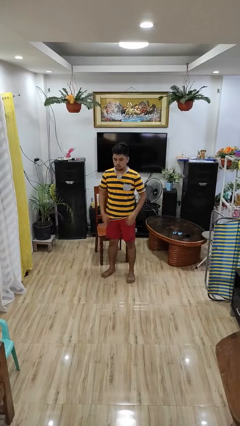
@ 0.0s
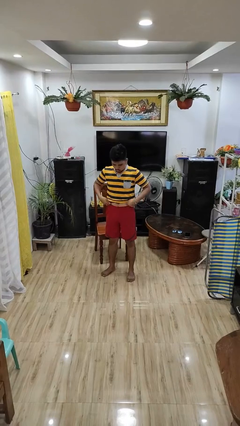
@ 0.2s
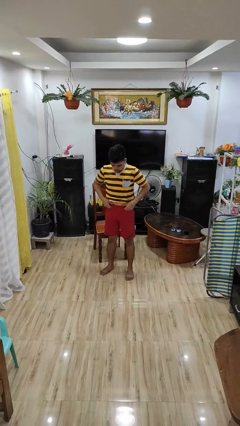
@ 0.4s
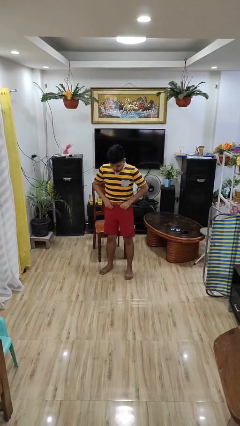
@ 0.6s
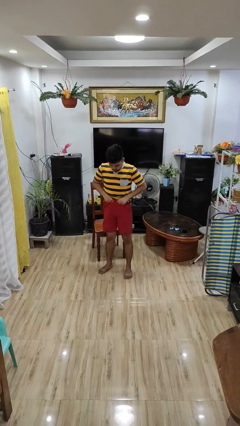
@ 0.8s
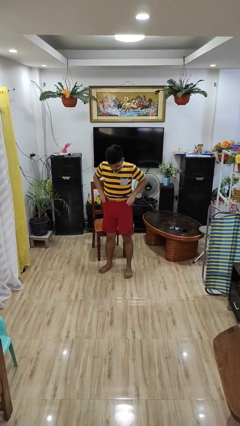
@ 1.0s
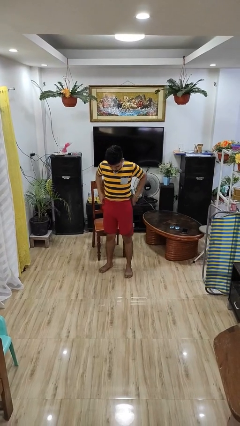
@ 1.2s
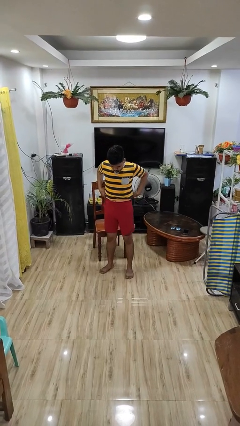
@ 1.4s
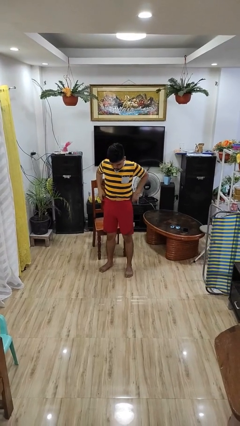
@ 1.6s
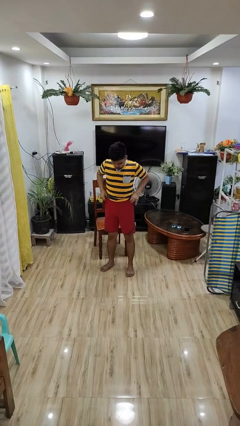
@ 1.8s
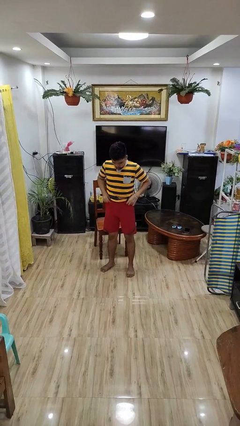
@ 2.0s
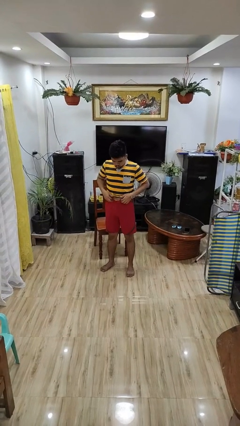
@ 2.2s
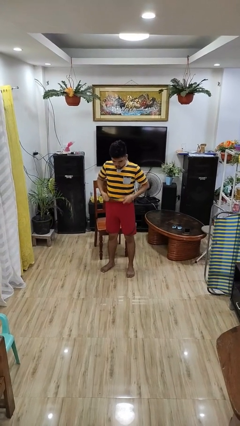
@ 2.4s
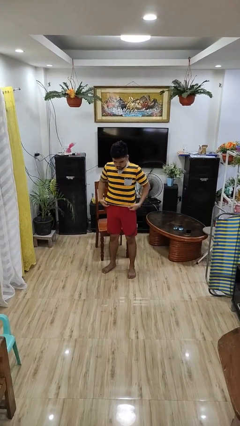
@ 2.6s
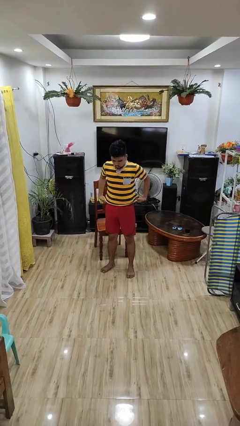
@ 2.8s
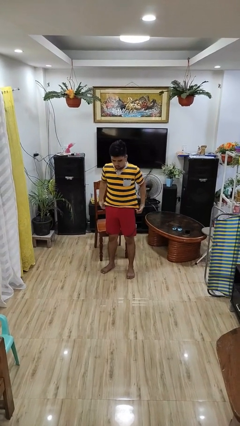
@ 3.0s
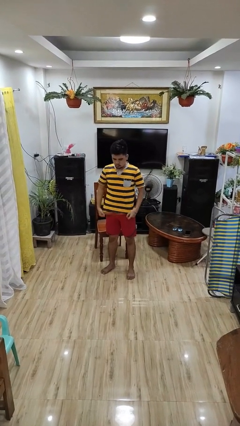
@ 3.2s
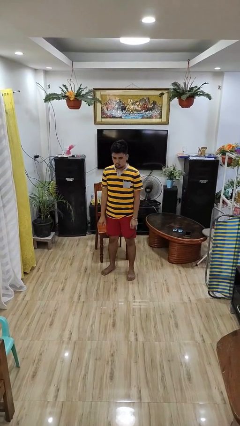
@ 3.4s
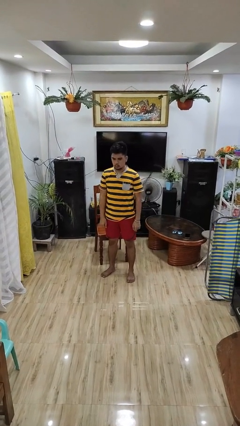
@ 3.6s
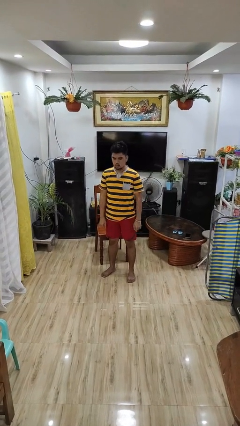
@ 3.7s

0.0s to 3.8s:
person hikes up pants

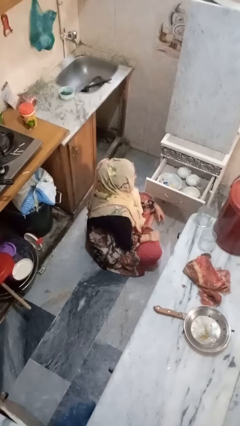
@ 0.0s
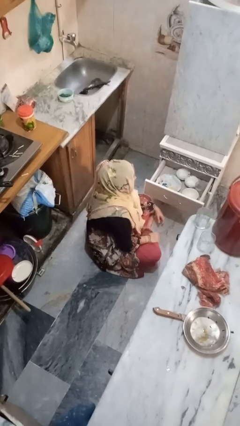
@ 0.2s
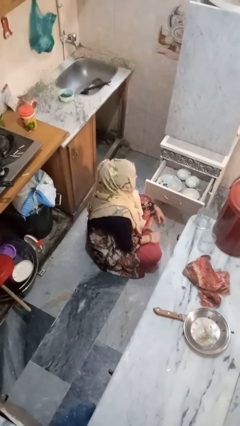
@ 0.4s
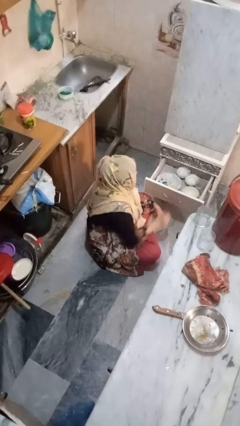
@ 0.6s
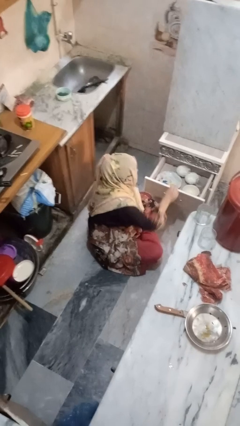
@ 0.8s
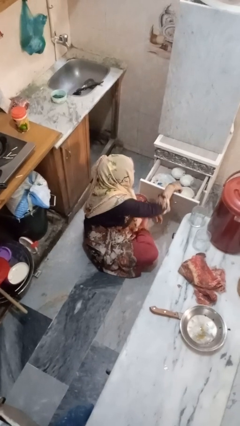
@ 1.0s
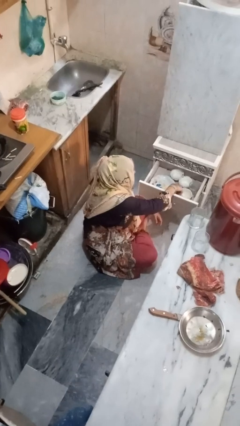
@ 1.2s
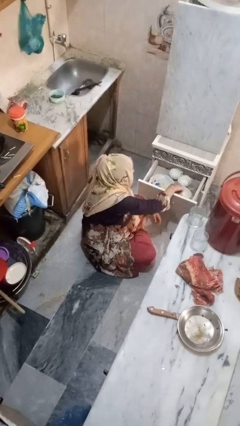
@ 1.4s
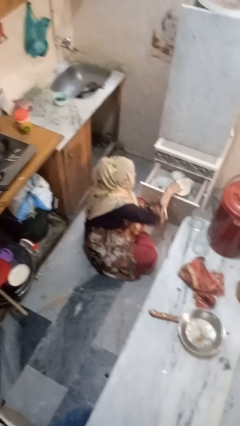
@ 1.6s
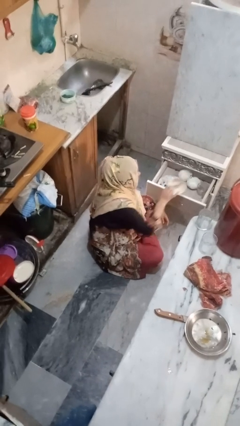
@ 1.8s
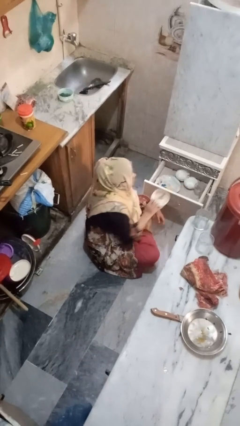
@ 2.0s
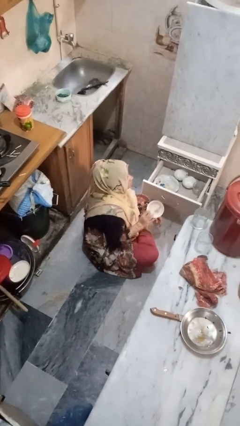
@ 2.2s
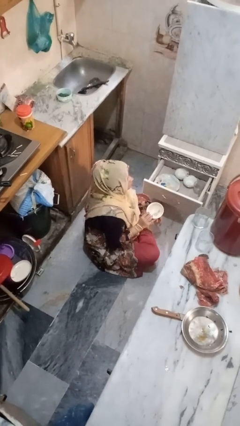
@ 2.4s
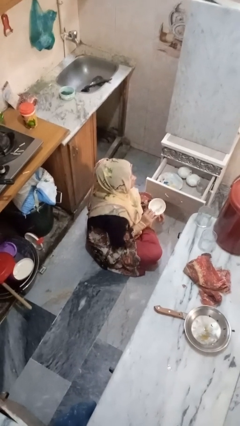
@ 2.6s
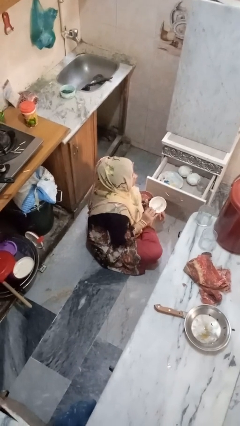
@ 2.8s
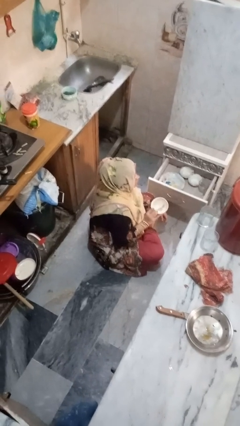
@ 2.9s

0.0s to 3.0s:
person takes object from kitchen drawer

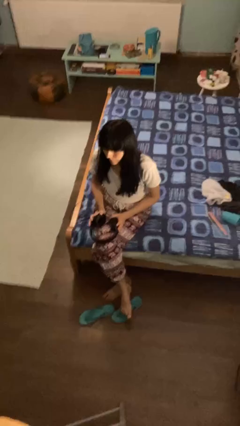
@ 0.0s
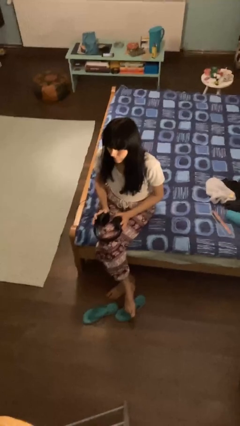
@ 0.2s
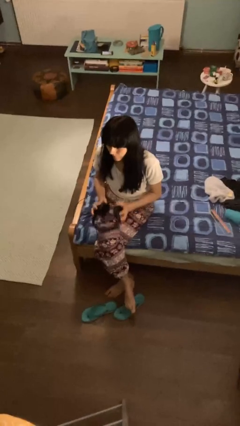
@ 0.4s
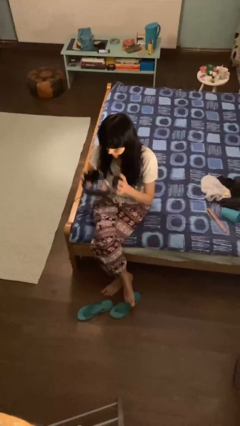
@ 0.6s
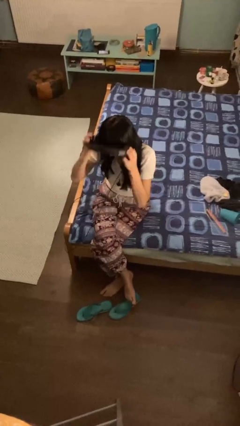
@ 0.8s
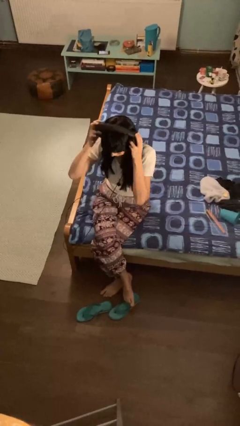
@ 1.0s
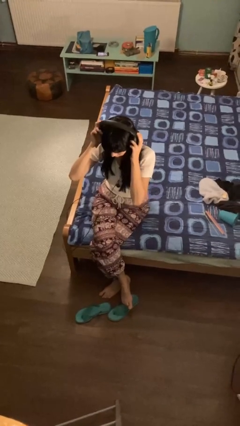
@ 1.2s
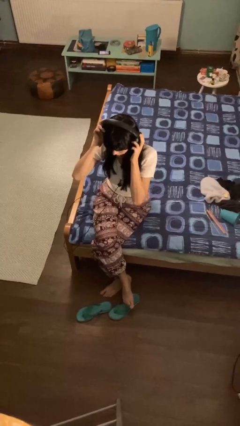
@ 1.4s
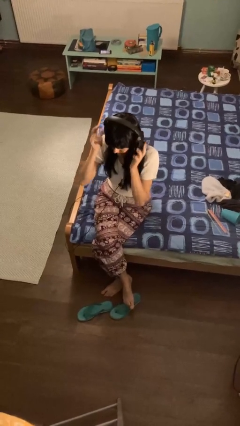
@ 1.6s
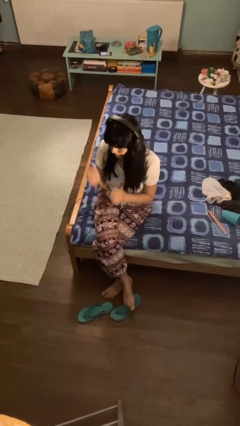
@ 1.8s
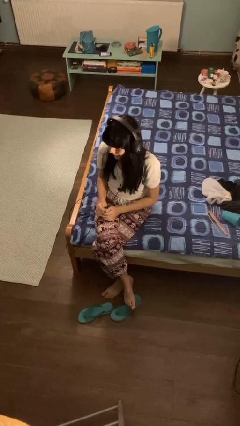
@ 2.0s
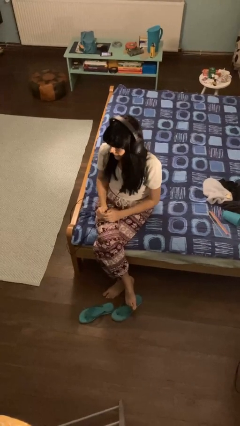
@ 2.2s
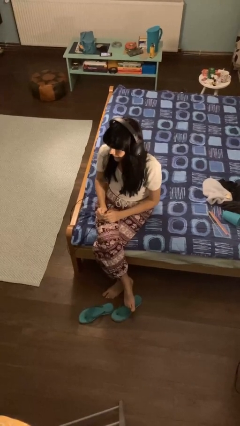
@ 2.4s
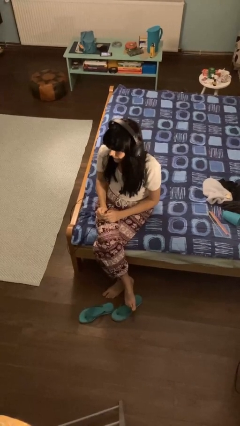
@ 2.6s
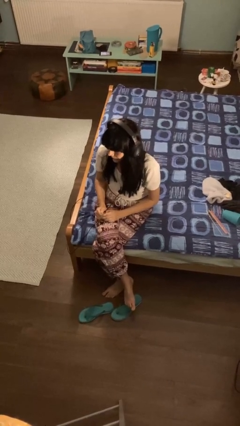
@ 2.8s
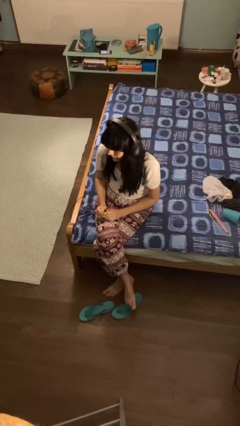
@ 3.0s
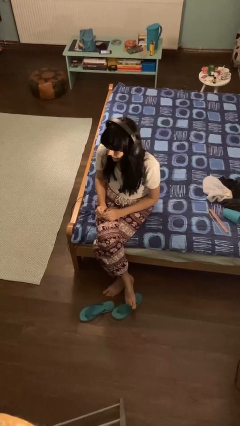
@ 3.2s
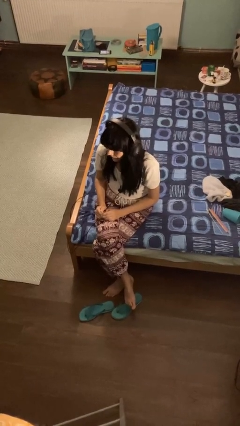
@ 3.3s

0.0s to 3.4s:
person puts on headphones

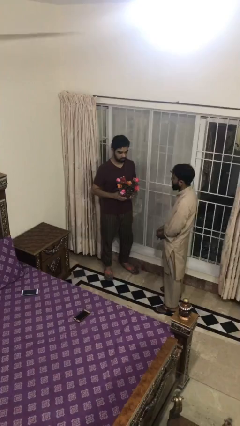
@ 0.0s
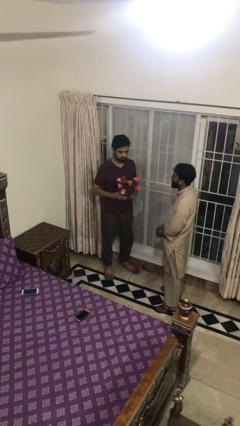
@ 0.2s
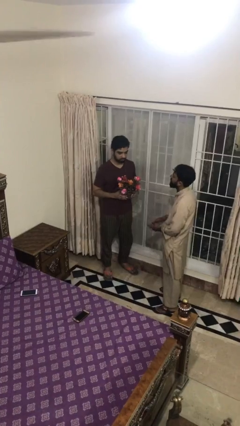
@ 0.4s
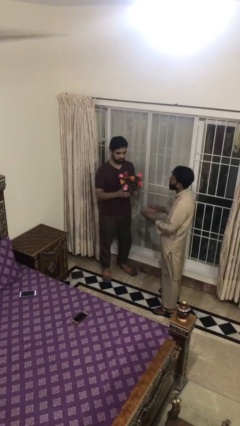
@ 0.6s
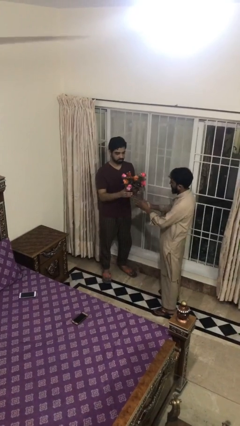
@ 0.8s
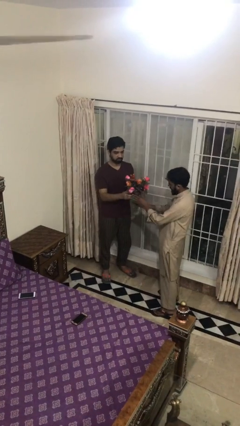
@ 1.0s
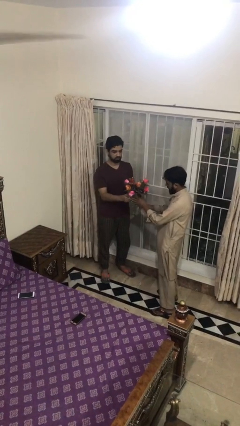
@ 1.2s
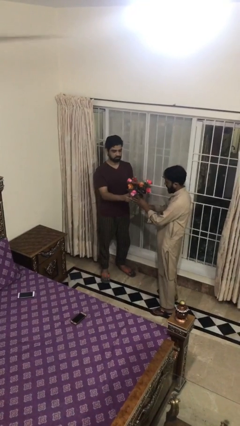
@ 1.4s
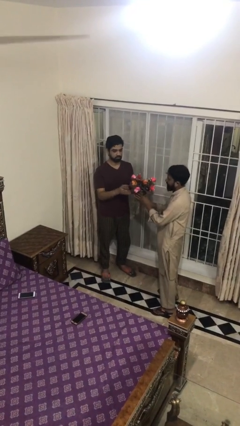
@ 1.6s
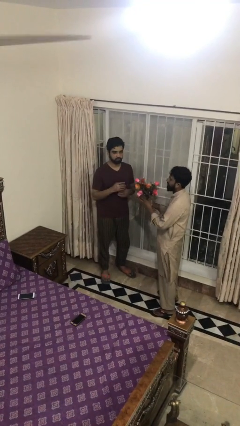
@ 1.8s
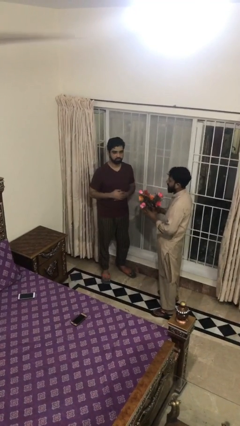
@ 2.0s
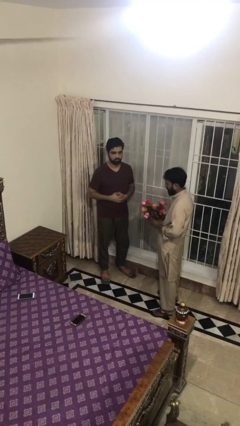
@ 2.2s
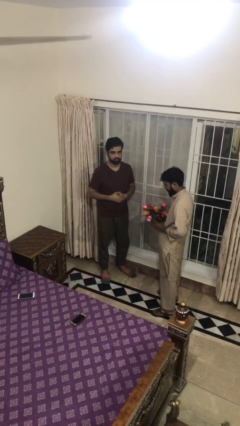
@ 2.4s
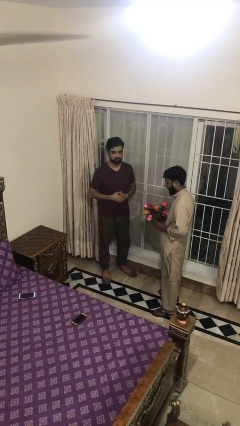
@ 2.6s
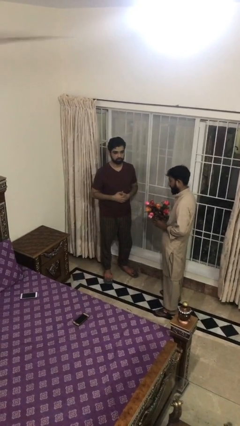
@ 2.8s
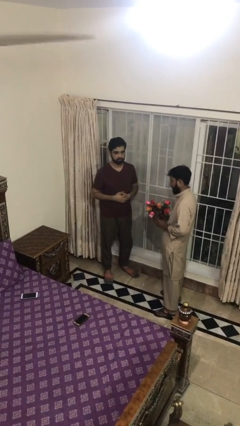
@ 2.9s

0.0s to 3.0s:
person transfers object to person

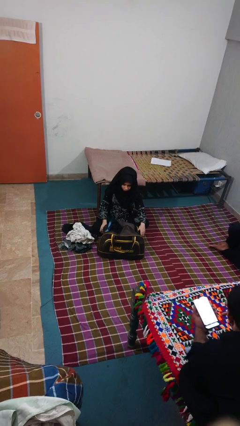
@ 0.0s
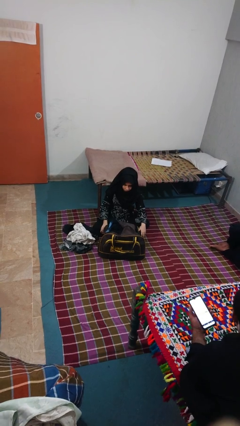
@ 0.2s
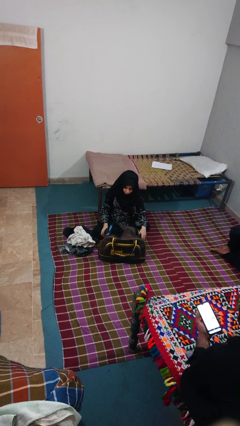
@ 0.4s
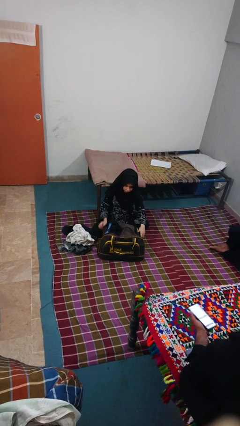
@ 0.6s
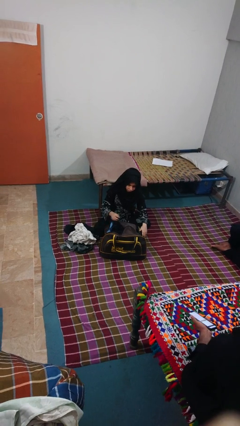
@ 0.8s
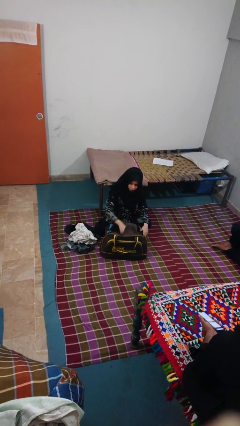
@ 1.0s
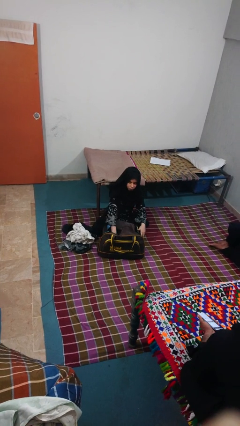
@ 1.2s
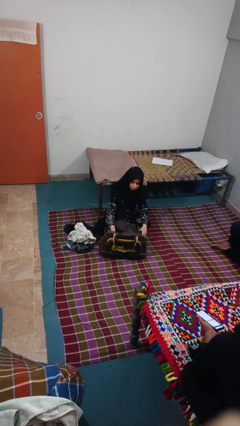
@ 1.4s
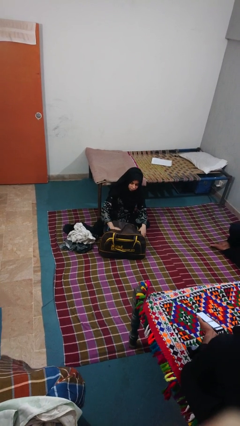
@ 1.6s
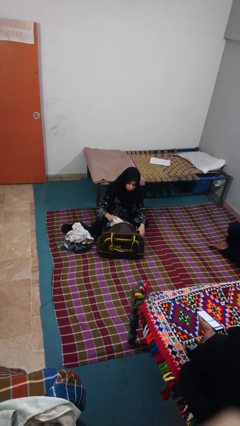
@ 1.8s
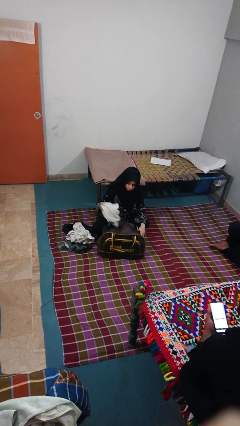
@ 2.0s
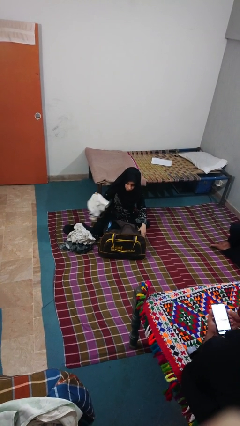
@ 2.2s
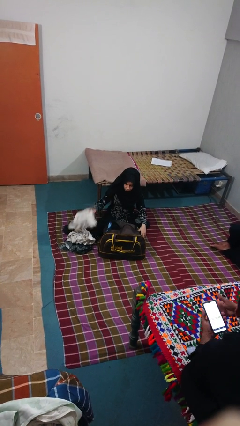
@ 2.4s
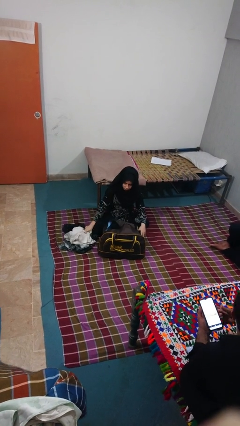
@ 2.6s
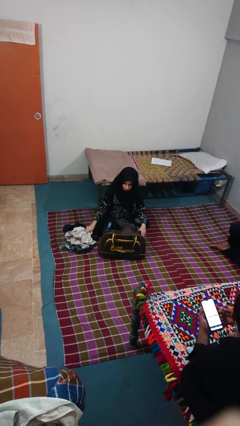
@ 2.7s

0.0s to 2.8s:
person unloads clothes from suitcase

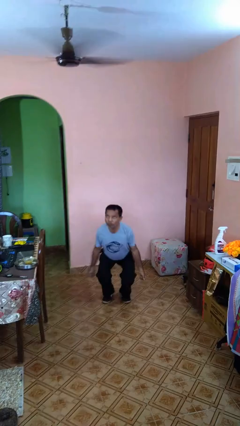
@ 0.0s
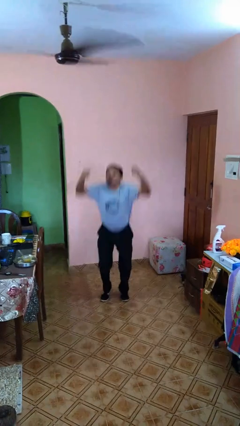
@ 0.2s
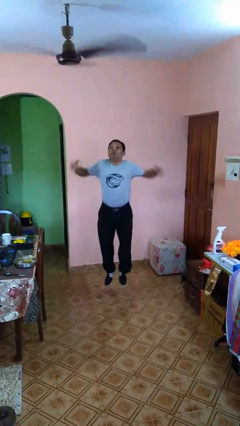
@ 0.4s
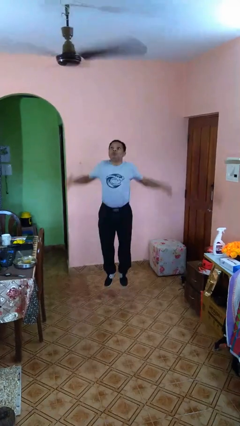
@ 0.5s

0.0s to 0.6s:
person jumps

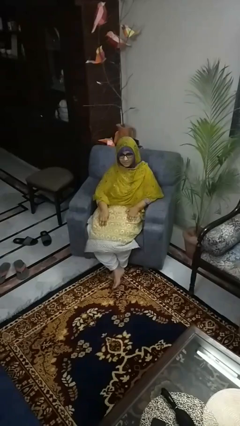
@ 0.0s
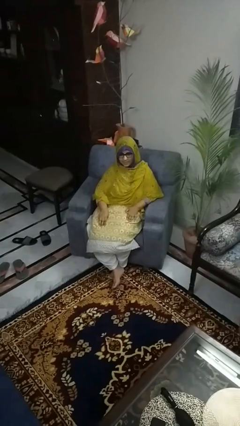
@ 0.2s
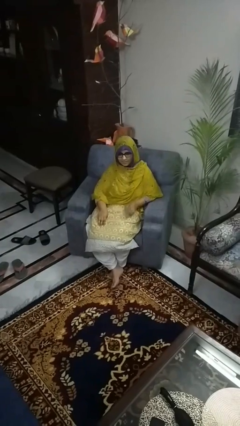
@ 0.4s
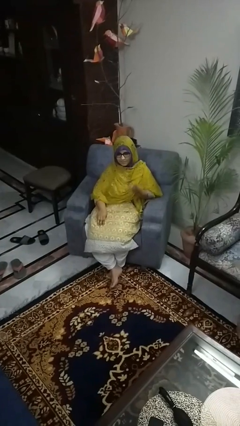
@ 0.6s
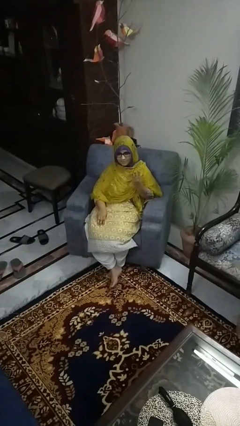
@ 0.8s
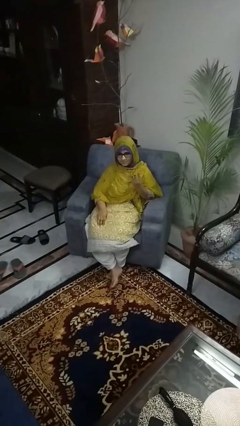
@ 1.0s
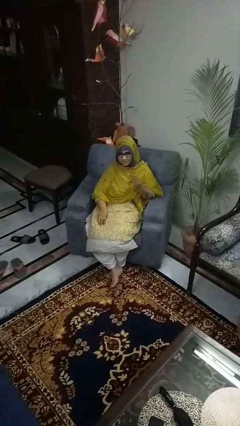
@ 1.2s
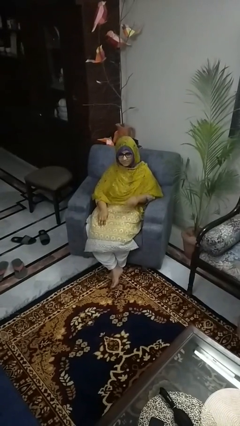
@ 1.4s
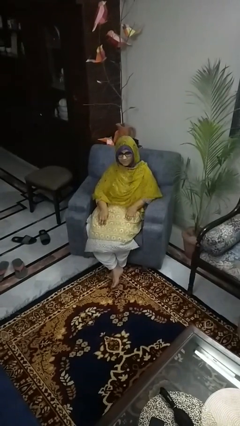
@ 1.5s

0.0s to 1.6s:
person gestures number three
